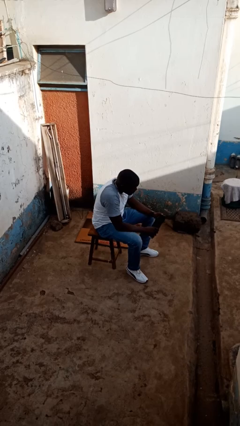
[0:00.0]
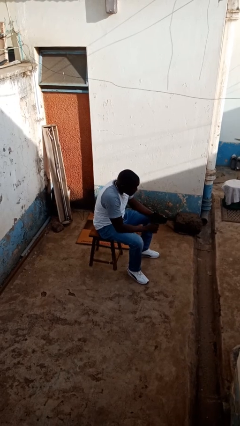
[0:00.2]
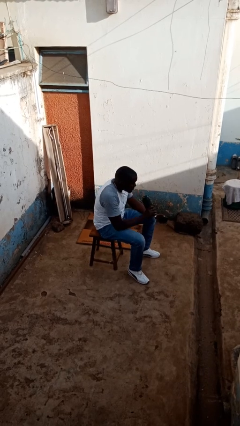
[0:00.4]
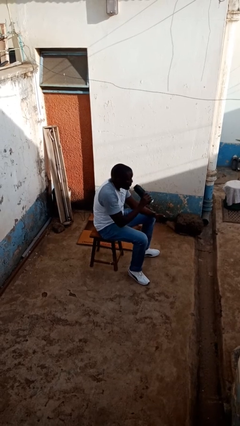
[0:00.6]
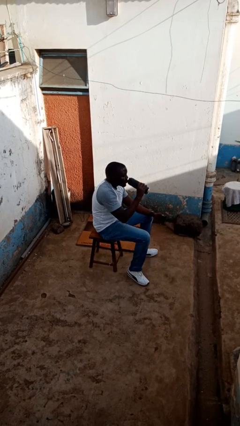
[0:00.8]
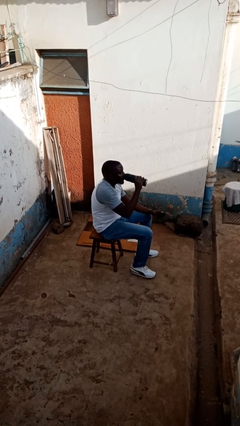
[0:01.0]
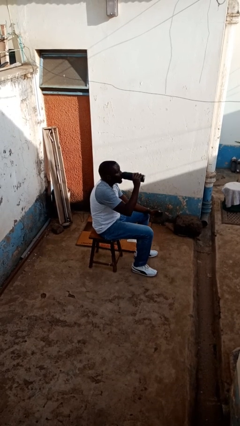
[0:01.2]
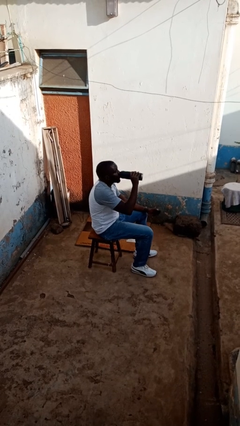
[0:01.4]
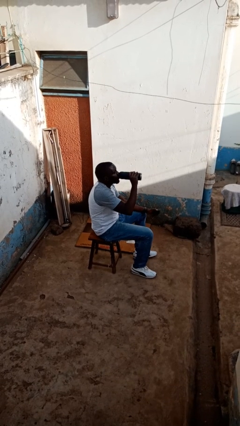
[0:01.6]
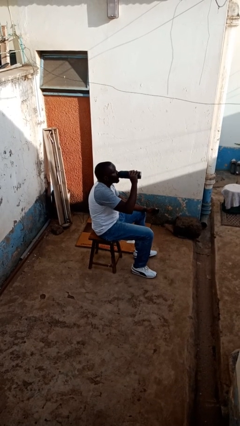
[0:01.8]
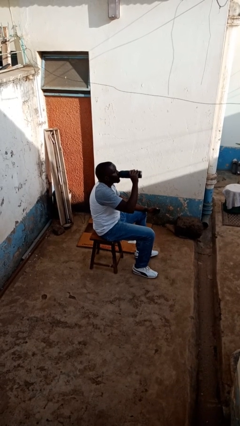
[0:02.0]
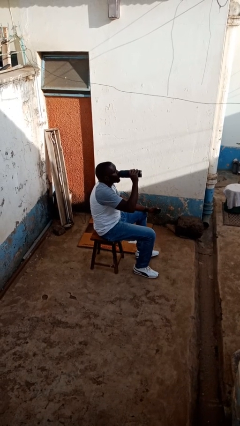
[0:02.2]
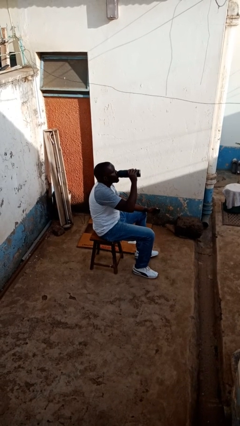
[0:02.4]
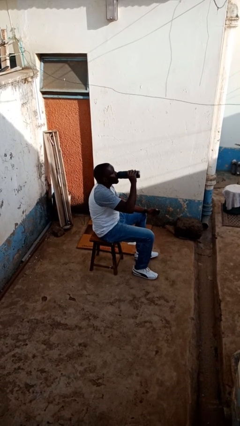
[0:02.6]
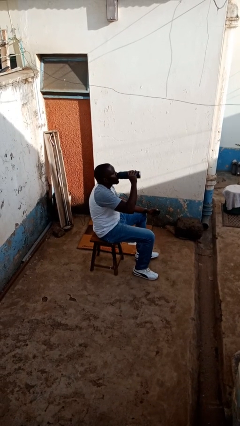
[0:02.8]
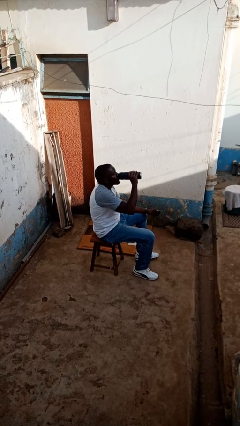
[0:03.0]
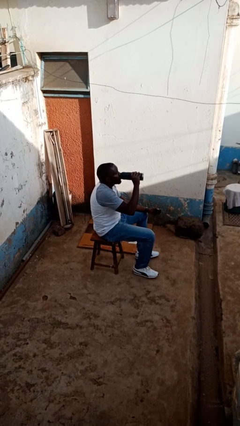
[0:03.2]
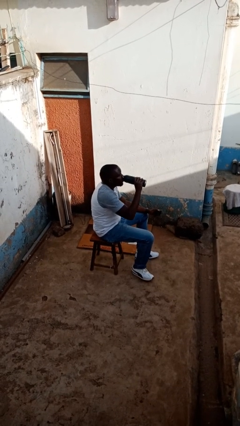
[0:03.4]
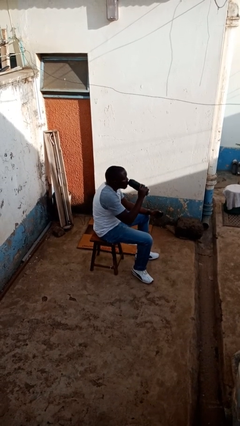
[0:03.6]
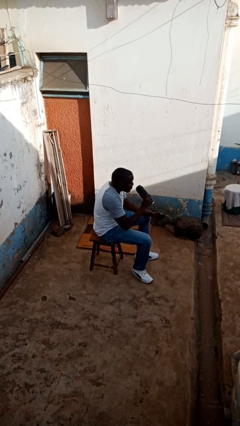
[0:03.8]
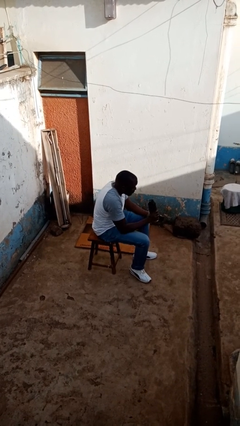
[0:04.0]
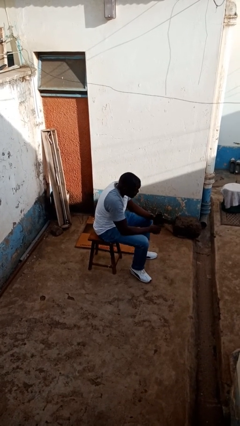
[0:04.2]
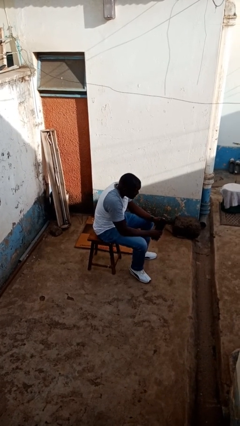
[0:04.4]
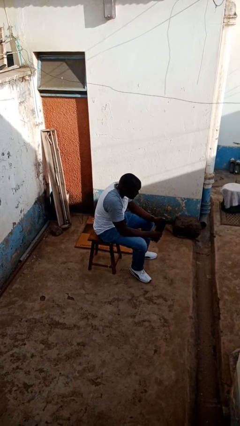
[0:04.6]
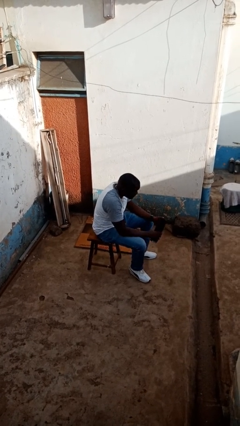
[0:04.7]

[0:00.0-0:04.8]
person drinks from bottle

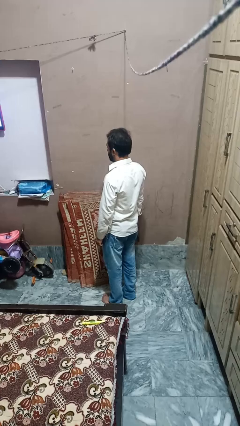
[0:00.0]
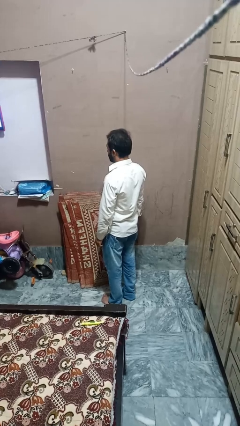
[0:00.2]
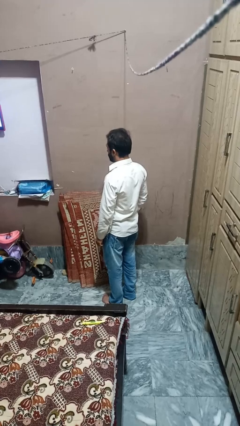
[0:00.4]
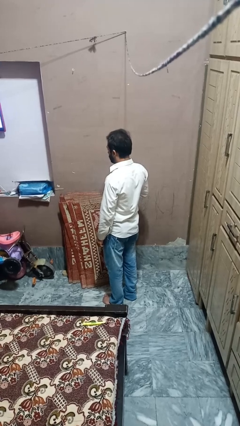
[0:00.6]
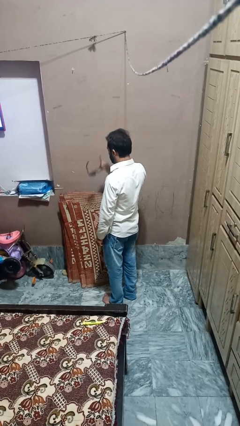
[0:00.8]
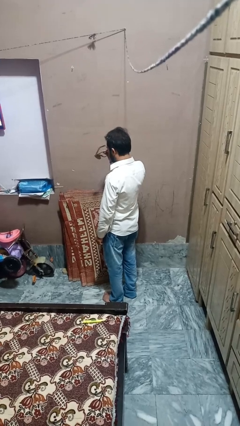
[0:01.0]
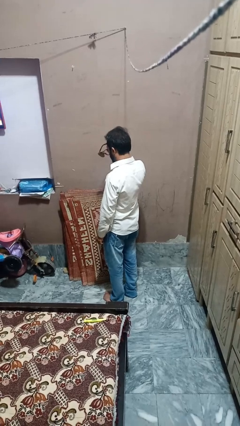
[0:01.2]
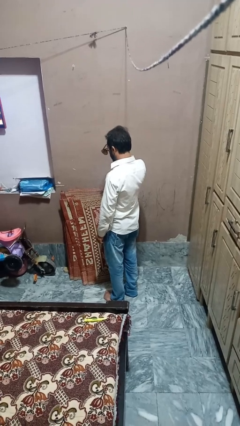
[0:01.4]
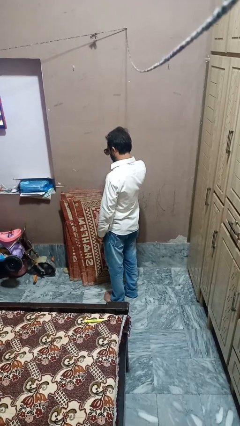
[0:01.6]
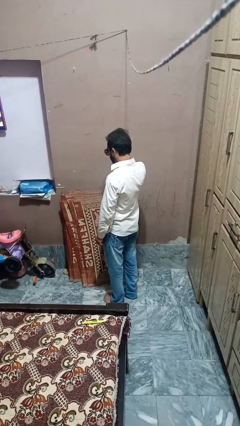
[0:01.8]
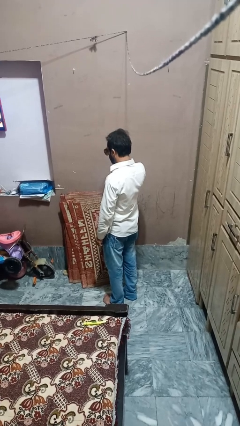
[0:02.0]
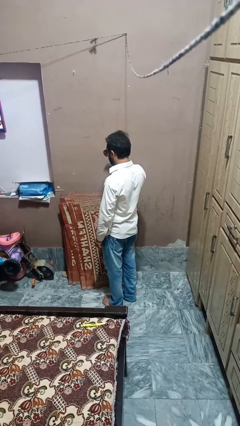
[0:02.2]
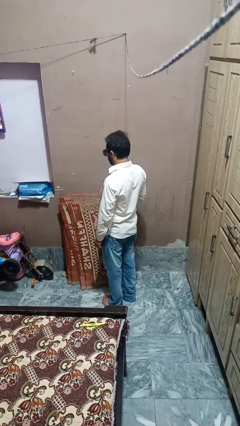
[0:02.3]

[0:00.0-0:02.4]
person puts on sunglasses

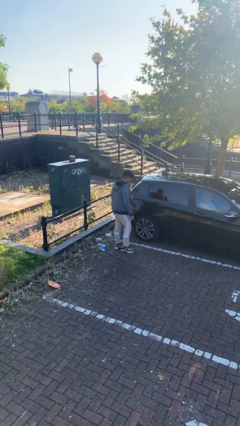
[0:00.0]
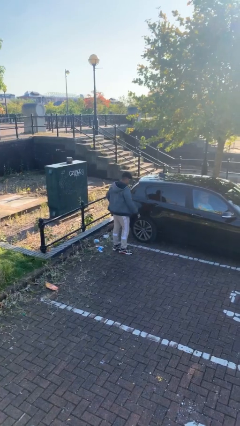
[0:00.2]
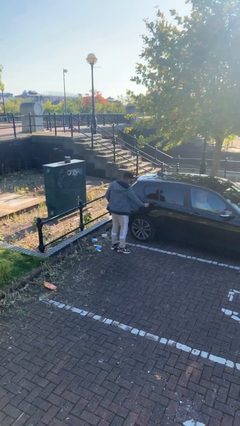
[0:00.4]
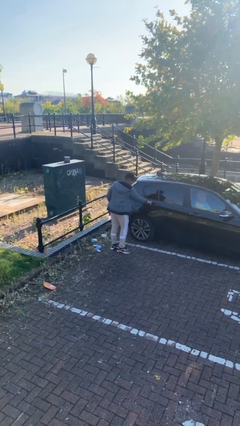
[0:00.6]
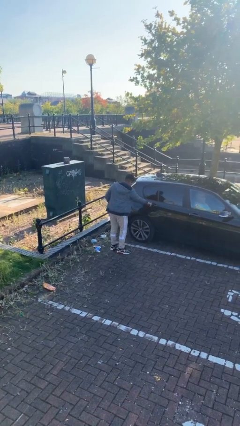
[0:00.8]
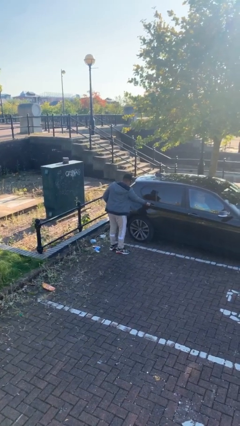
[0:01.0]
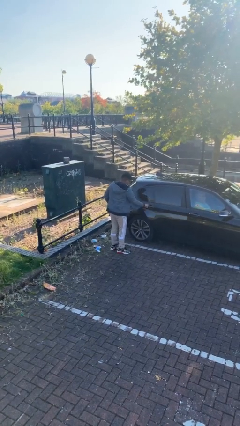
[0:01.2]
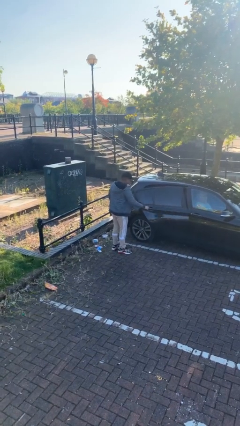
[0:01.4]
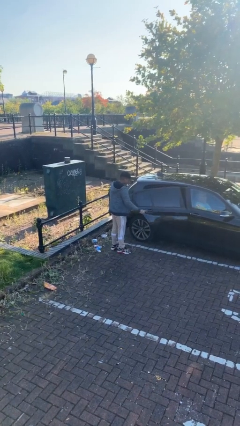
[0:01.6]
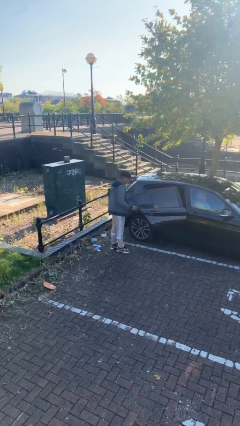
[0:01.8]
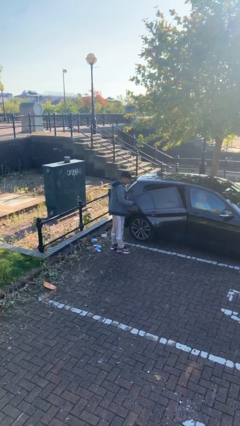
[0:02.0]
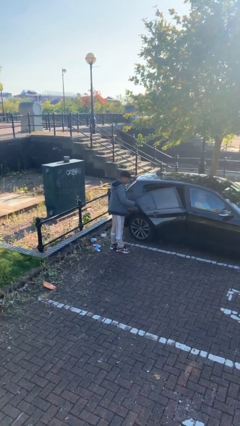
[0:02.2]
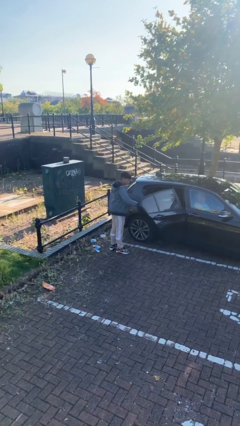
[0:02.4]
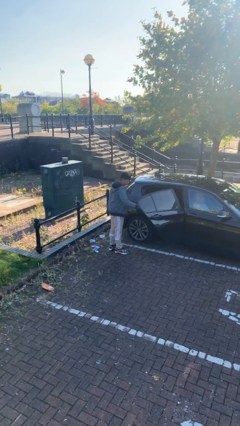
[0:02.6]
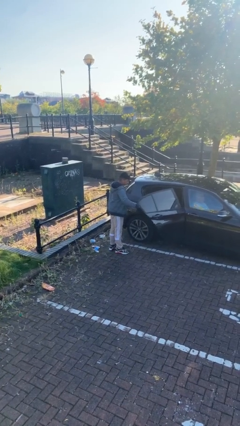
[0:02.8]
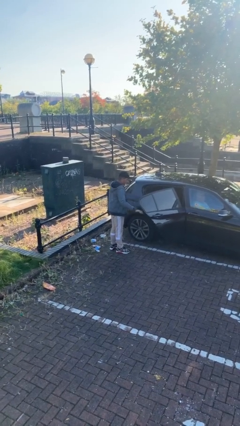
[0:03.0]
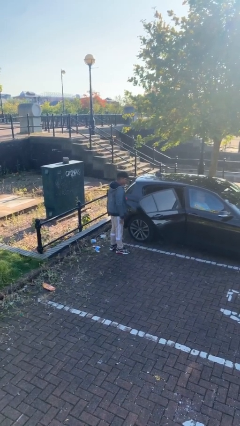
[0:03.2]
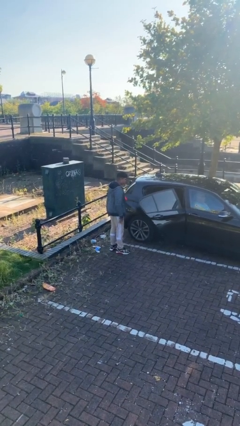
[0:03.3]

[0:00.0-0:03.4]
person opens car door

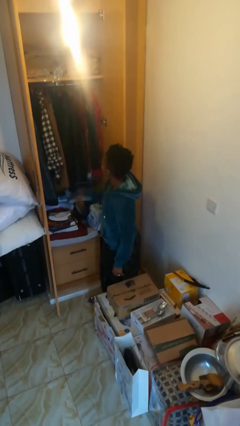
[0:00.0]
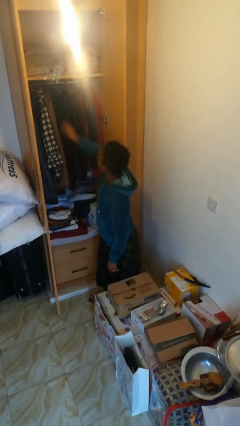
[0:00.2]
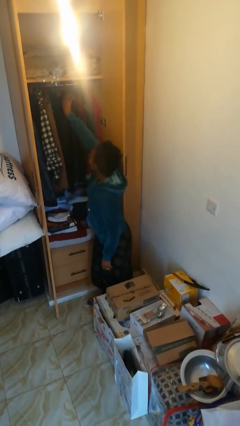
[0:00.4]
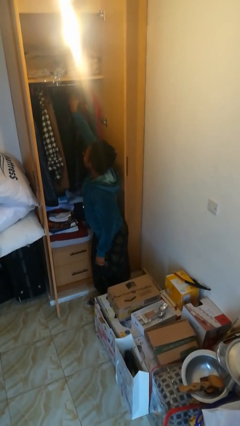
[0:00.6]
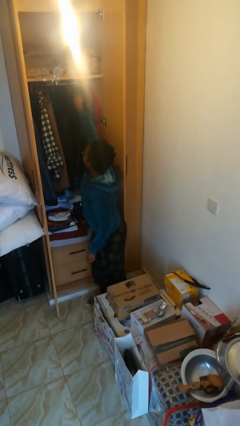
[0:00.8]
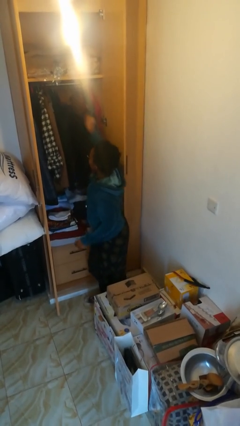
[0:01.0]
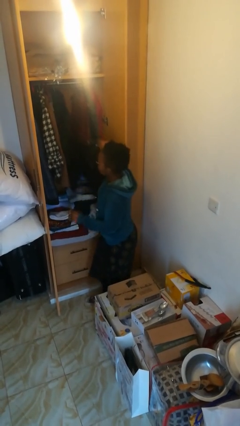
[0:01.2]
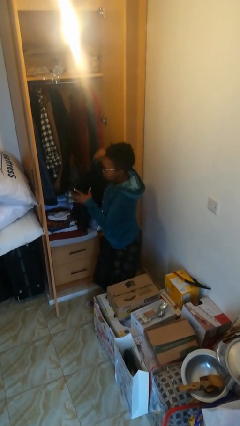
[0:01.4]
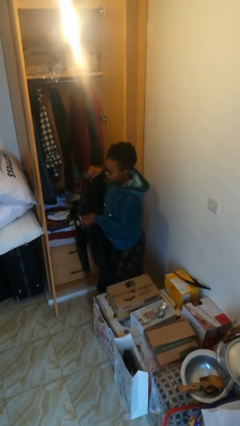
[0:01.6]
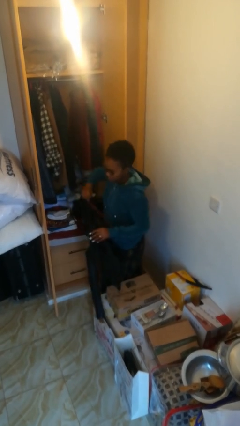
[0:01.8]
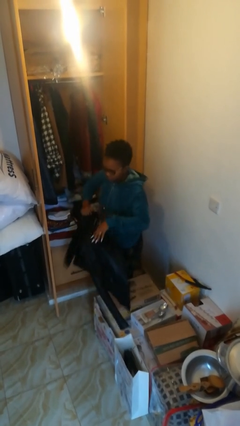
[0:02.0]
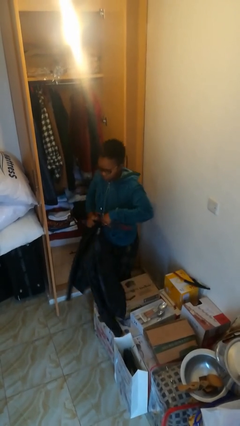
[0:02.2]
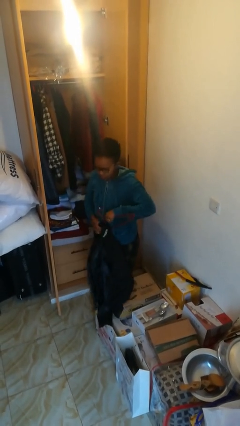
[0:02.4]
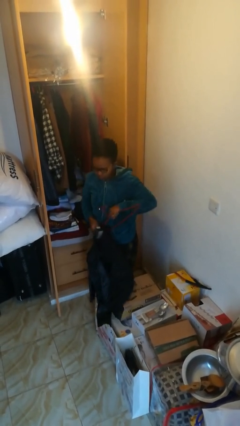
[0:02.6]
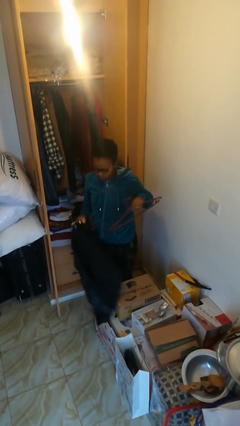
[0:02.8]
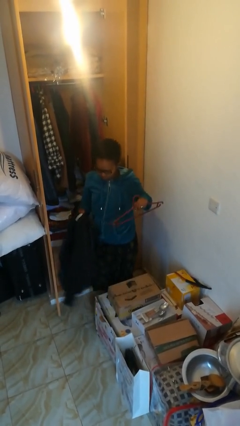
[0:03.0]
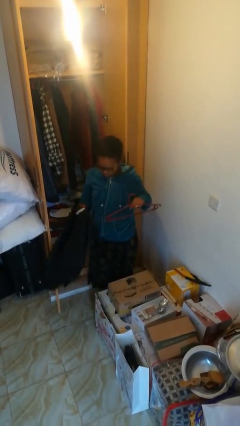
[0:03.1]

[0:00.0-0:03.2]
person takes clothes from closet

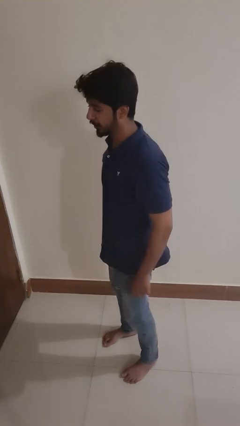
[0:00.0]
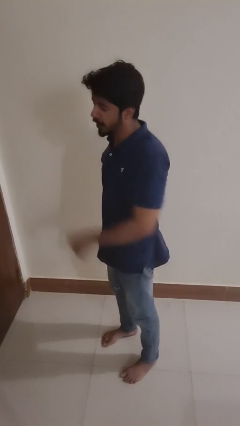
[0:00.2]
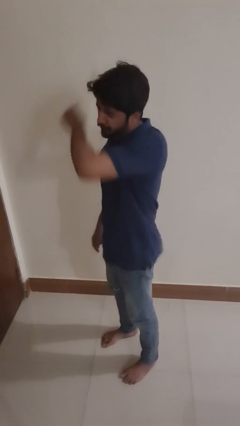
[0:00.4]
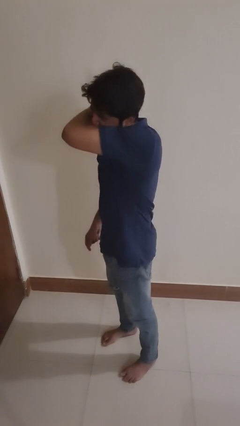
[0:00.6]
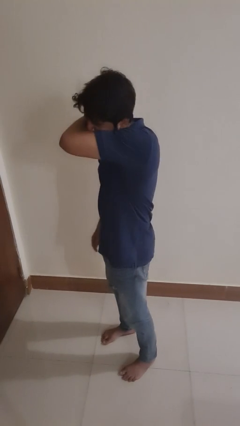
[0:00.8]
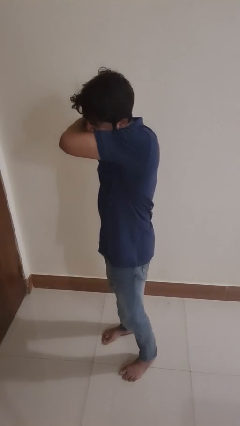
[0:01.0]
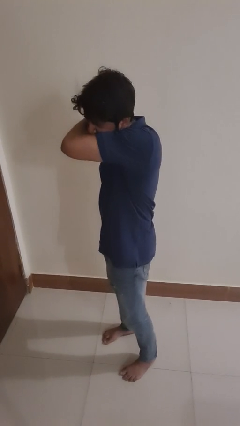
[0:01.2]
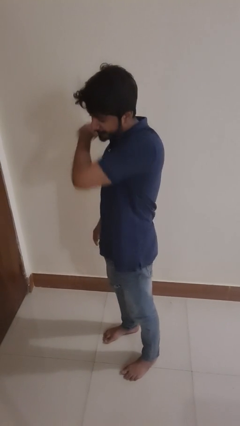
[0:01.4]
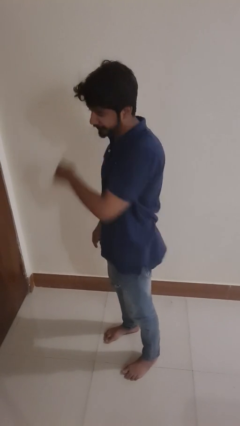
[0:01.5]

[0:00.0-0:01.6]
person sneezes into arm

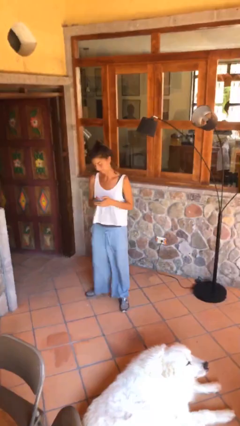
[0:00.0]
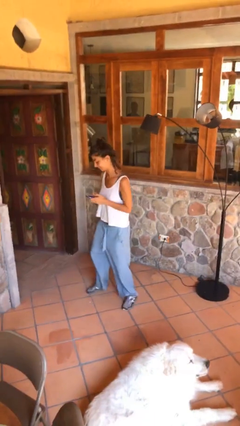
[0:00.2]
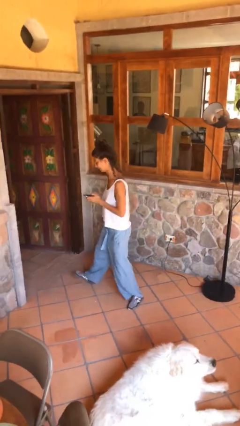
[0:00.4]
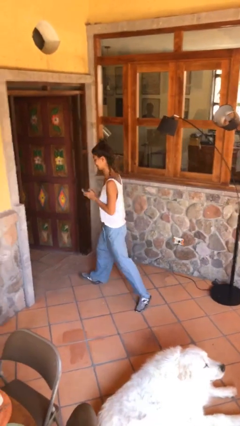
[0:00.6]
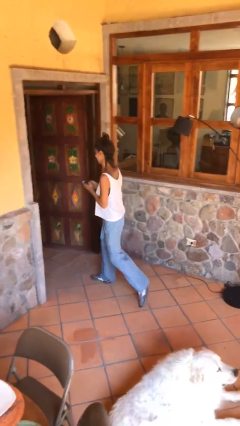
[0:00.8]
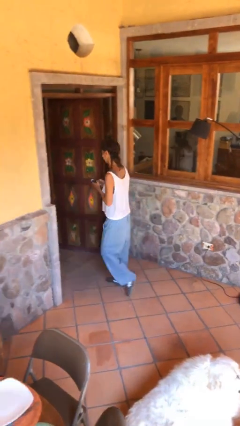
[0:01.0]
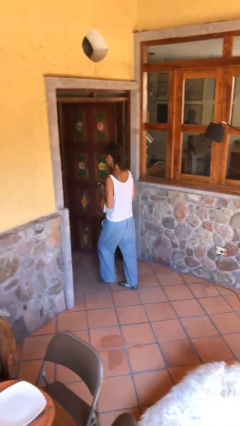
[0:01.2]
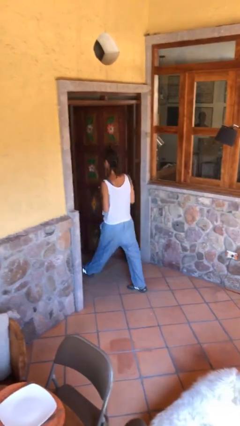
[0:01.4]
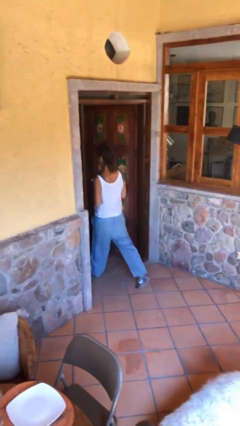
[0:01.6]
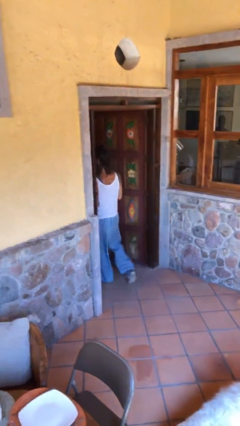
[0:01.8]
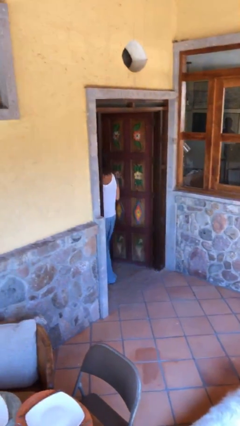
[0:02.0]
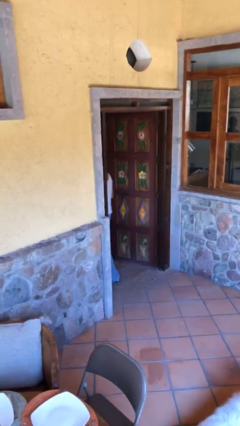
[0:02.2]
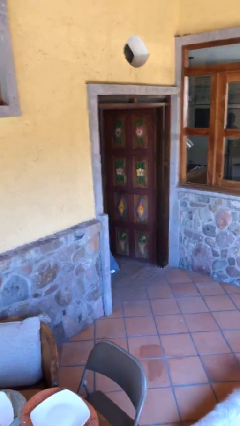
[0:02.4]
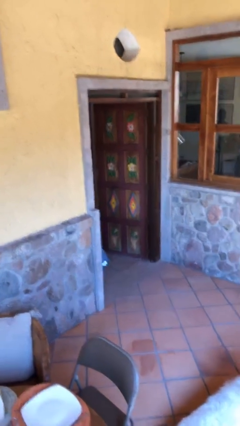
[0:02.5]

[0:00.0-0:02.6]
person exits scene through structure
